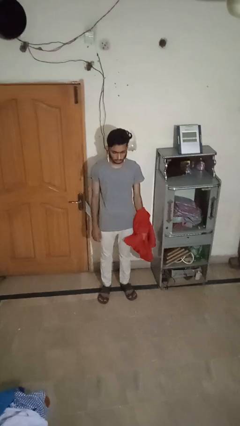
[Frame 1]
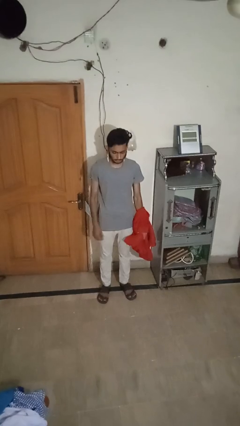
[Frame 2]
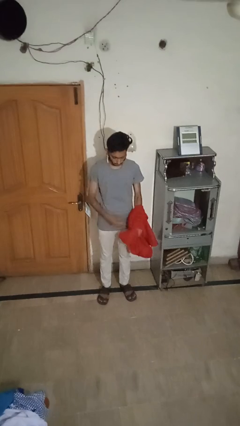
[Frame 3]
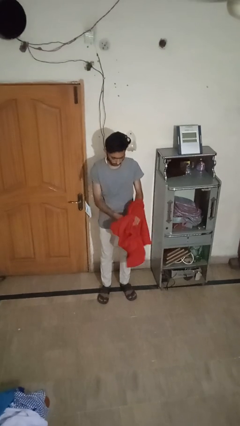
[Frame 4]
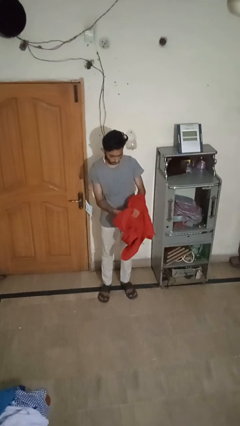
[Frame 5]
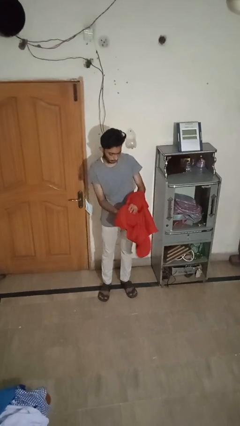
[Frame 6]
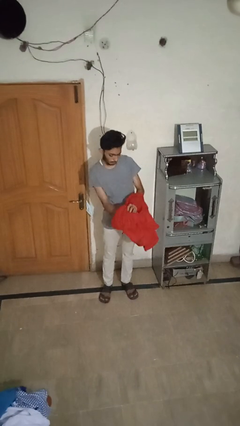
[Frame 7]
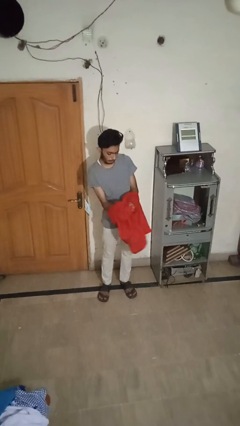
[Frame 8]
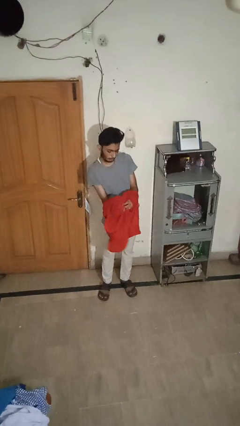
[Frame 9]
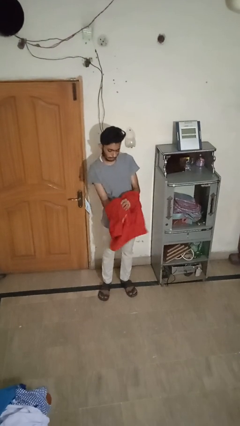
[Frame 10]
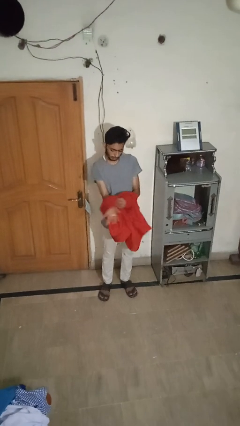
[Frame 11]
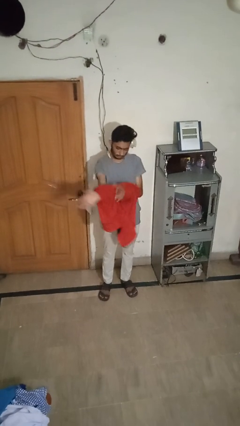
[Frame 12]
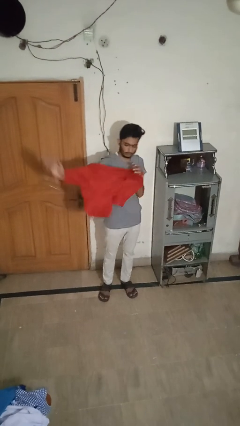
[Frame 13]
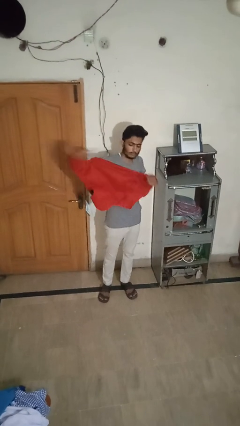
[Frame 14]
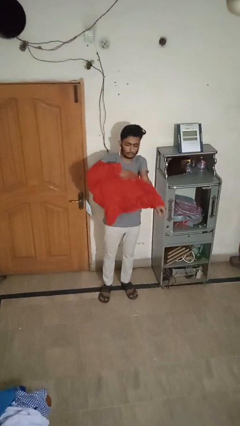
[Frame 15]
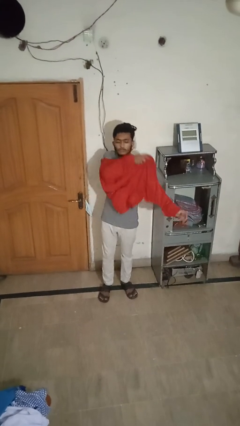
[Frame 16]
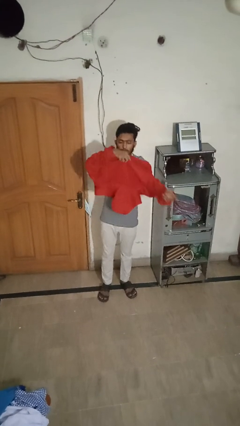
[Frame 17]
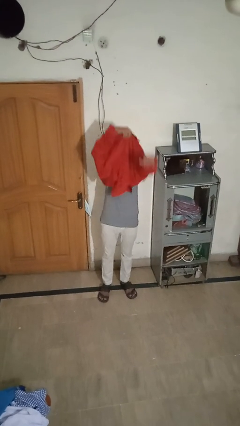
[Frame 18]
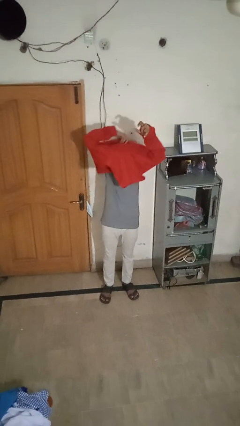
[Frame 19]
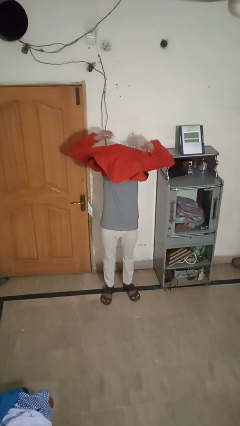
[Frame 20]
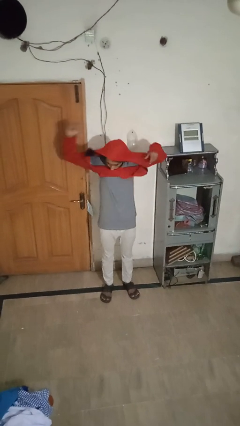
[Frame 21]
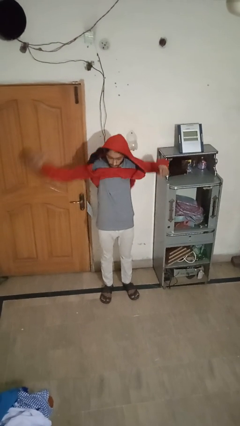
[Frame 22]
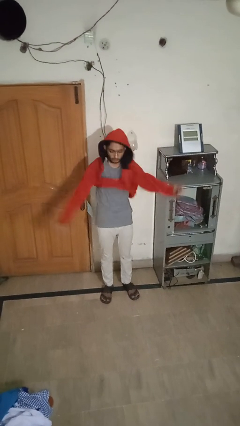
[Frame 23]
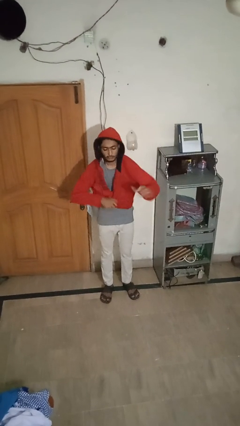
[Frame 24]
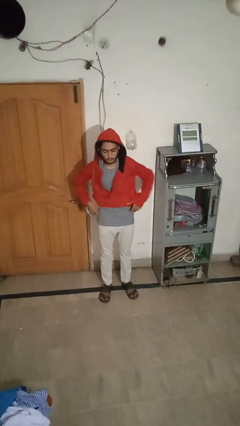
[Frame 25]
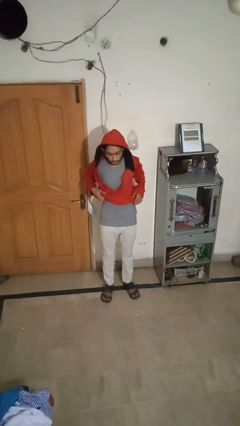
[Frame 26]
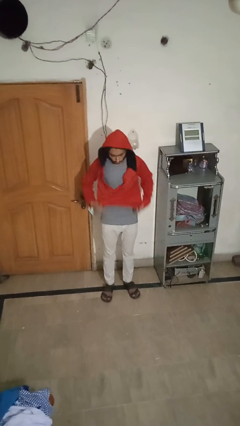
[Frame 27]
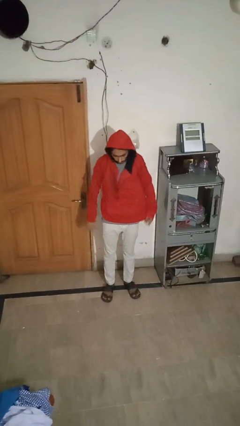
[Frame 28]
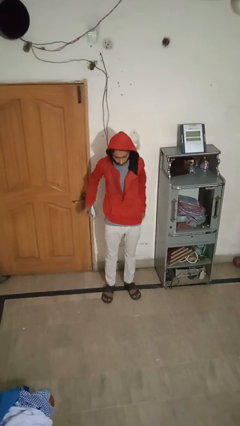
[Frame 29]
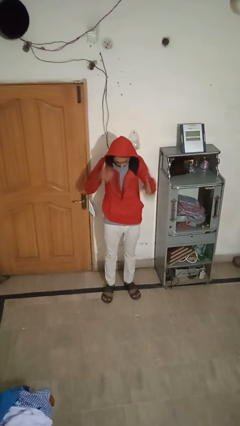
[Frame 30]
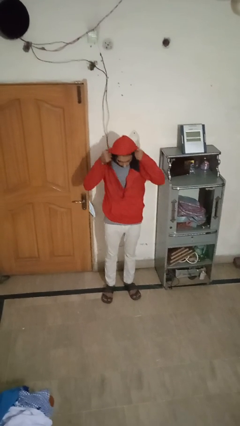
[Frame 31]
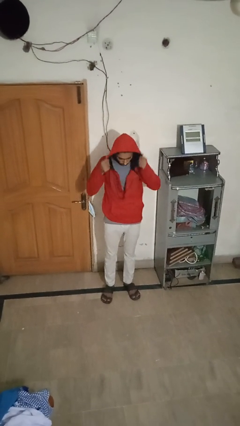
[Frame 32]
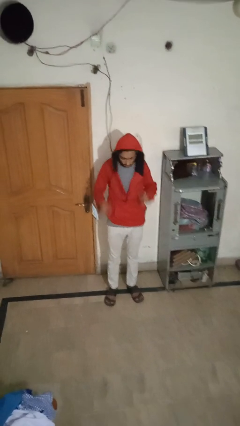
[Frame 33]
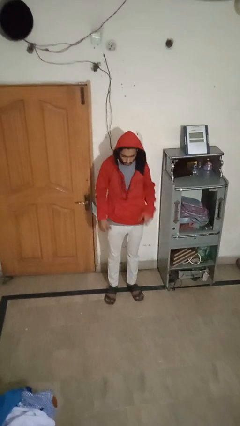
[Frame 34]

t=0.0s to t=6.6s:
person puts on hoodie

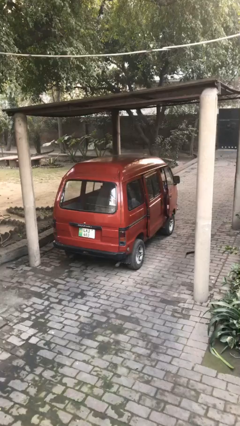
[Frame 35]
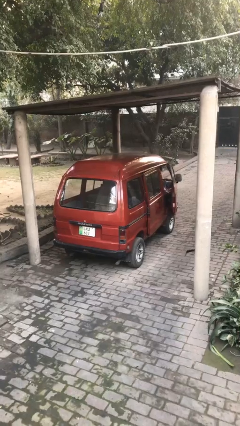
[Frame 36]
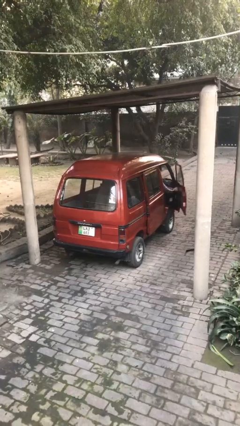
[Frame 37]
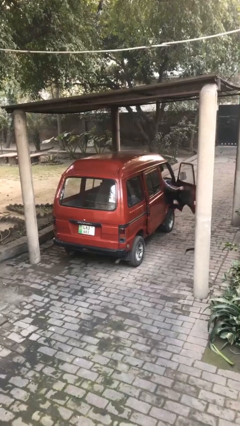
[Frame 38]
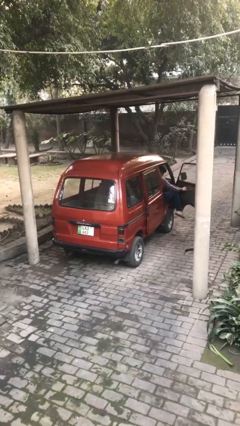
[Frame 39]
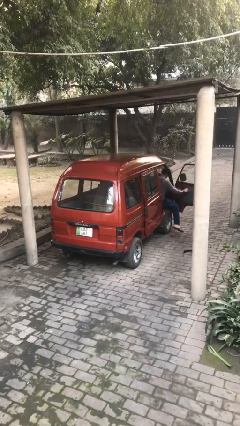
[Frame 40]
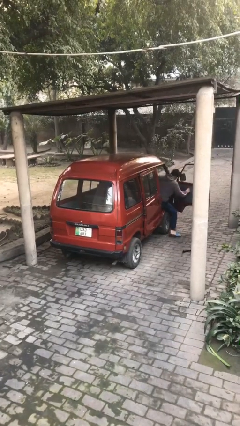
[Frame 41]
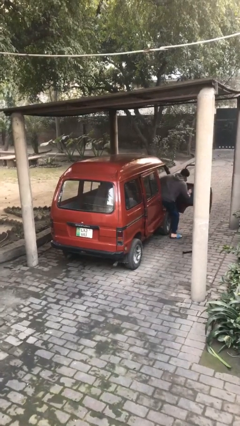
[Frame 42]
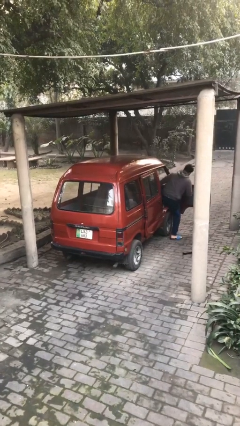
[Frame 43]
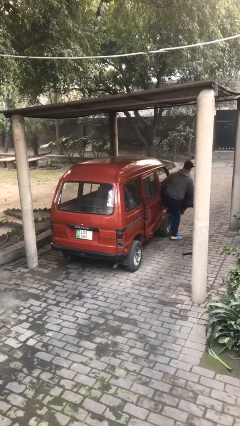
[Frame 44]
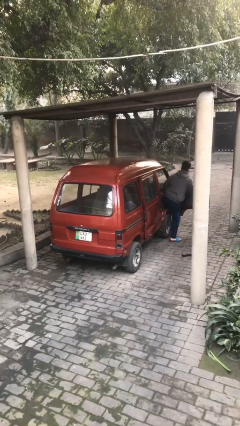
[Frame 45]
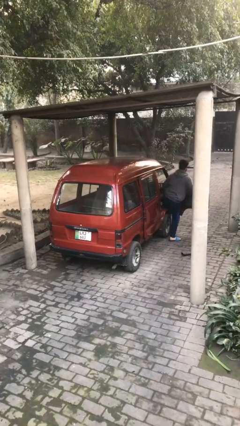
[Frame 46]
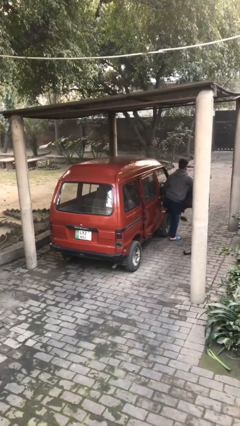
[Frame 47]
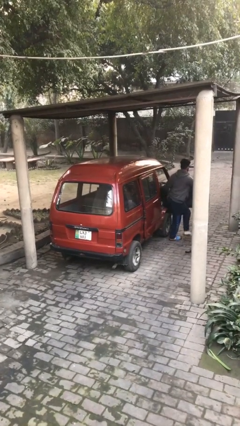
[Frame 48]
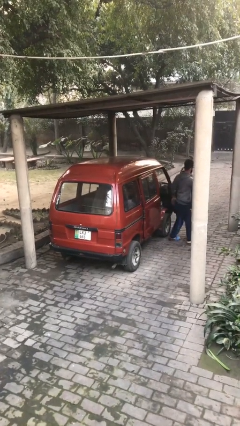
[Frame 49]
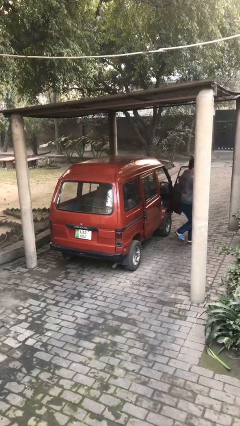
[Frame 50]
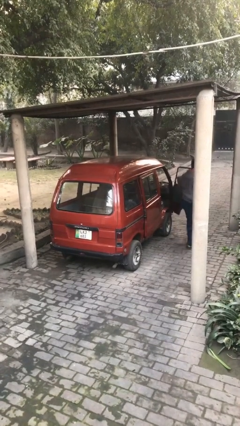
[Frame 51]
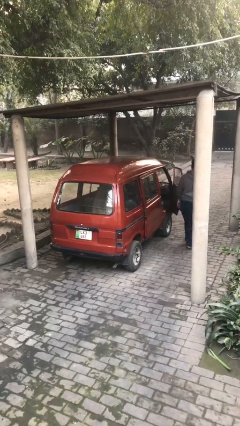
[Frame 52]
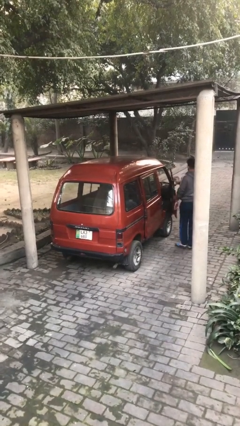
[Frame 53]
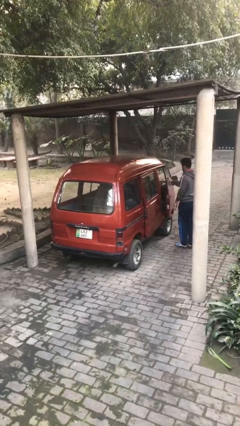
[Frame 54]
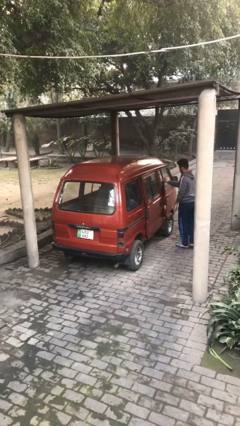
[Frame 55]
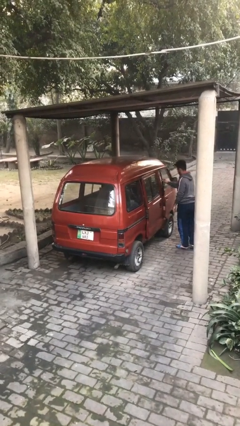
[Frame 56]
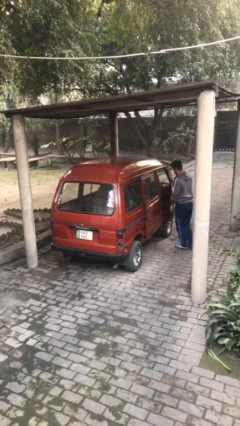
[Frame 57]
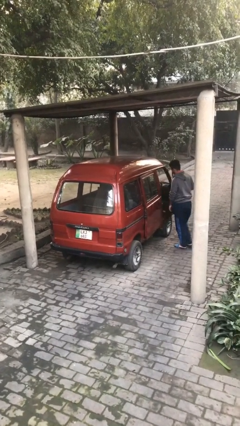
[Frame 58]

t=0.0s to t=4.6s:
car drops off person

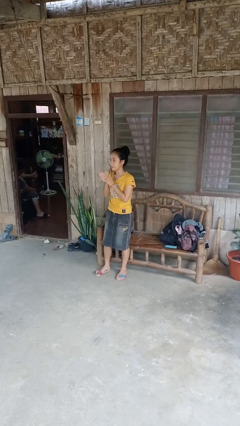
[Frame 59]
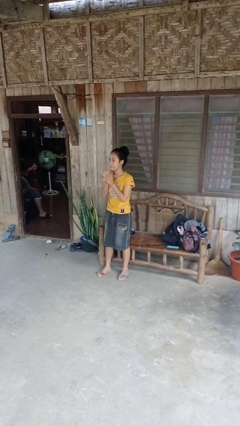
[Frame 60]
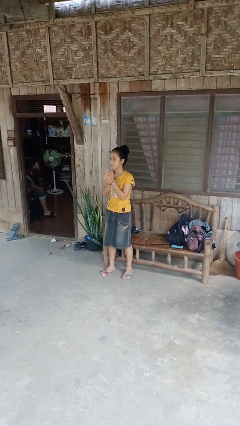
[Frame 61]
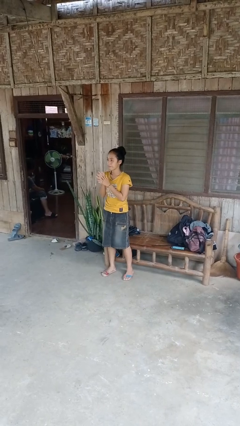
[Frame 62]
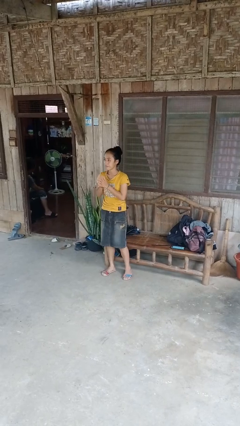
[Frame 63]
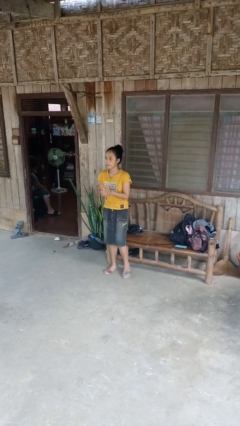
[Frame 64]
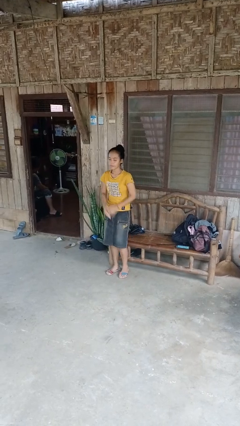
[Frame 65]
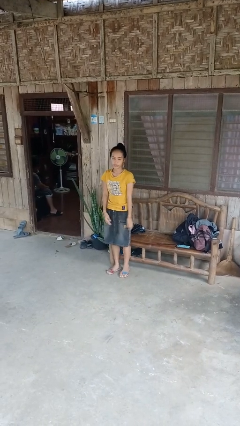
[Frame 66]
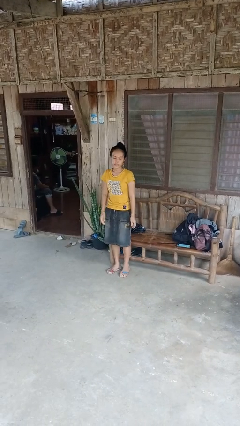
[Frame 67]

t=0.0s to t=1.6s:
person blows into hands

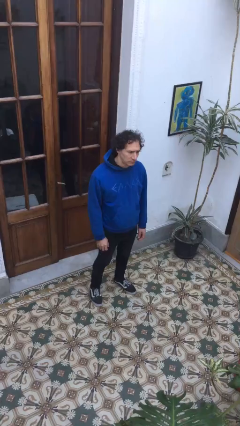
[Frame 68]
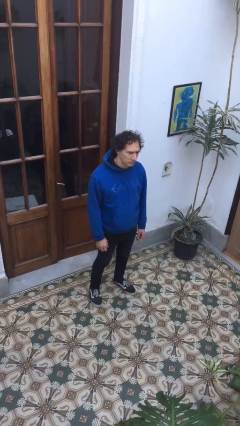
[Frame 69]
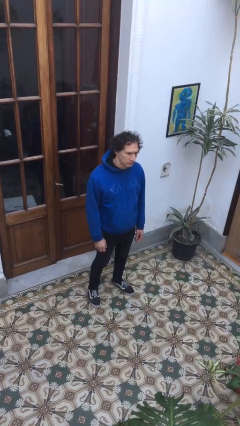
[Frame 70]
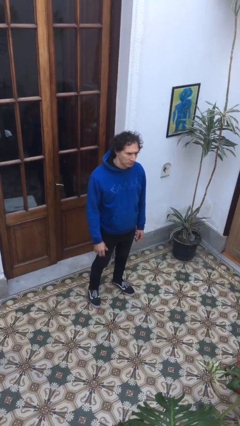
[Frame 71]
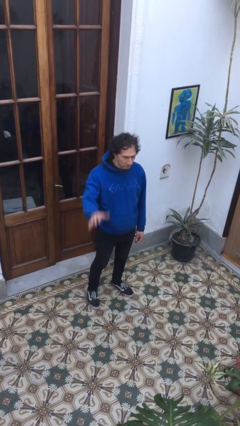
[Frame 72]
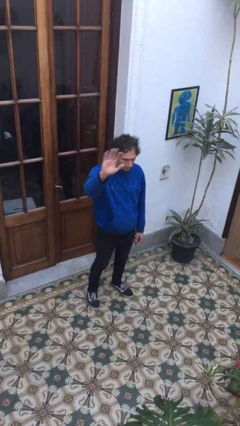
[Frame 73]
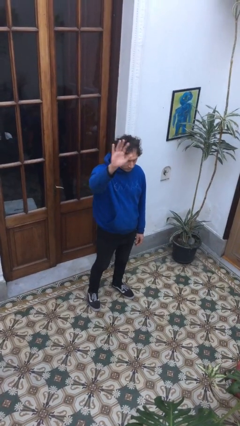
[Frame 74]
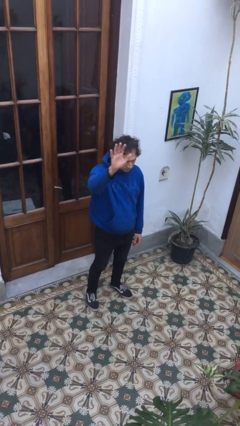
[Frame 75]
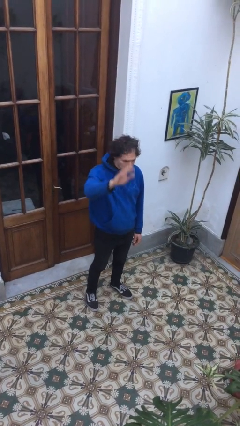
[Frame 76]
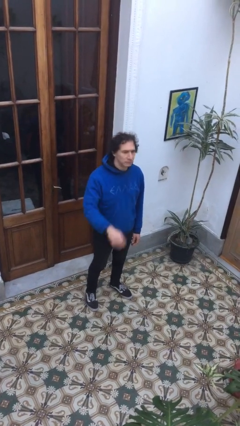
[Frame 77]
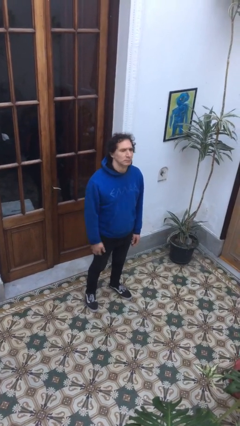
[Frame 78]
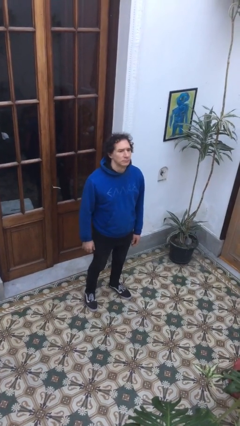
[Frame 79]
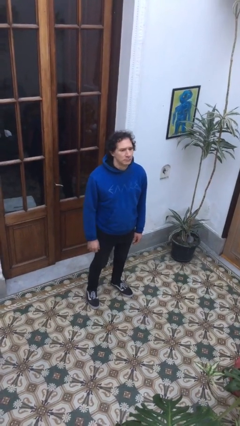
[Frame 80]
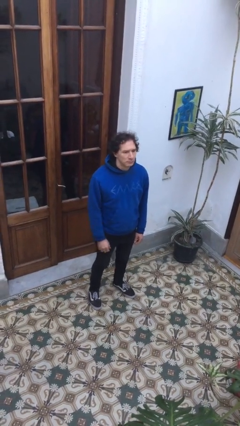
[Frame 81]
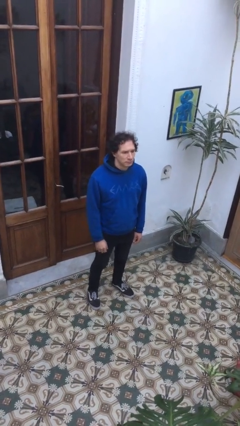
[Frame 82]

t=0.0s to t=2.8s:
person waves at person

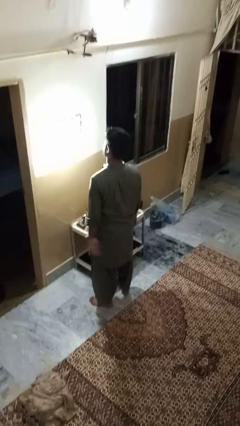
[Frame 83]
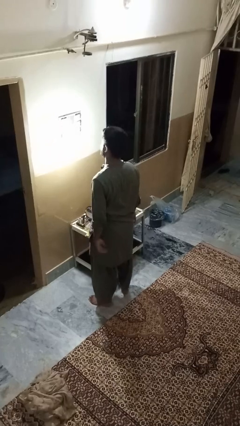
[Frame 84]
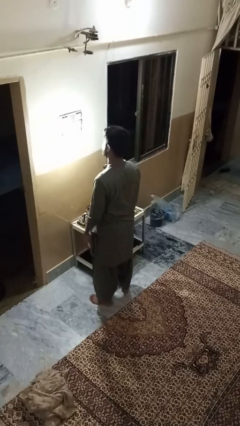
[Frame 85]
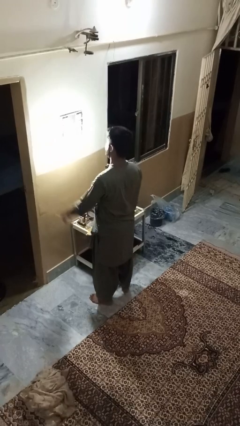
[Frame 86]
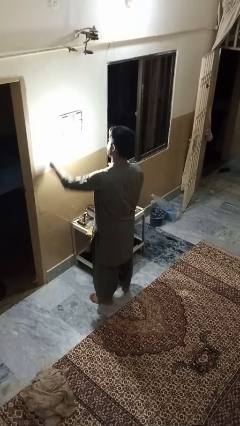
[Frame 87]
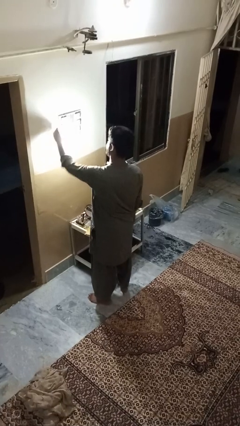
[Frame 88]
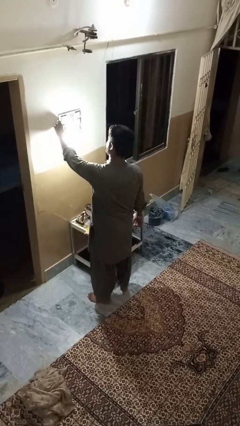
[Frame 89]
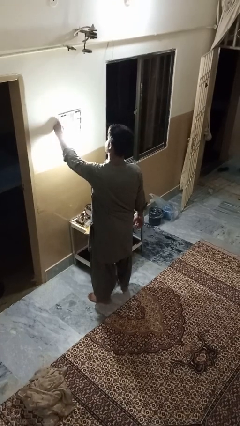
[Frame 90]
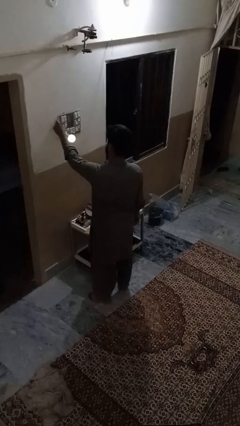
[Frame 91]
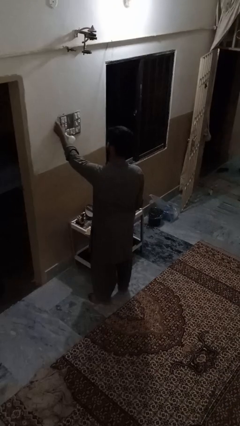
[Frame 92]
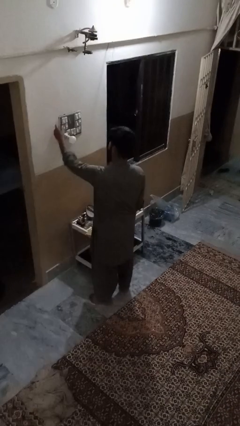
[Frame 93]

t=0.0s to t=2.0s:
person turns off lamp
